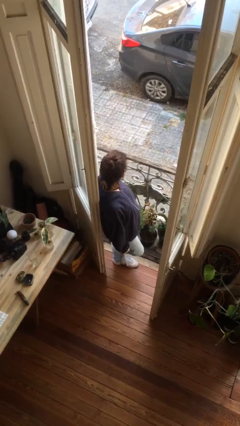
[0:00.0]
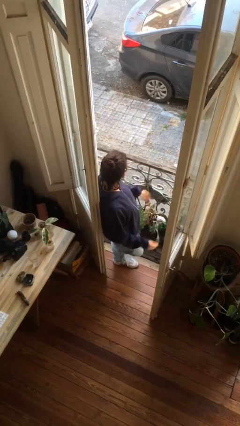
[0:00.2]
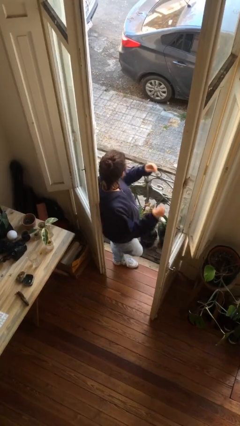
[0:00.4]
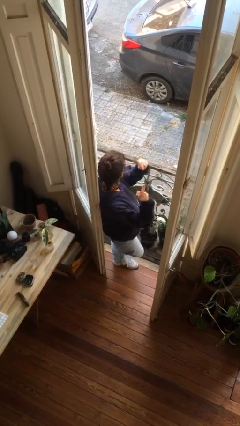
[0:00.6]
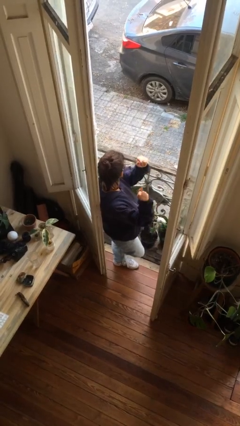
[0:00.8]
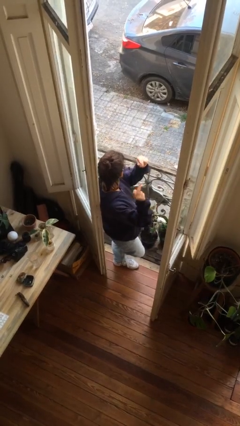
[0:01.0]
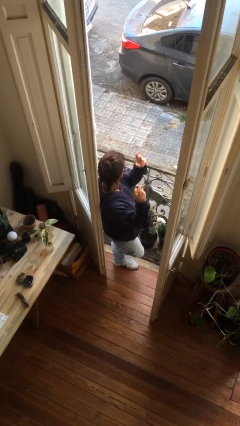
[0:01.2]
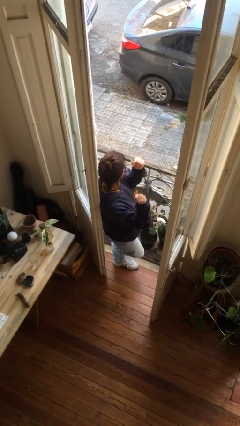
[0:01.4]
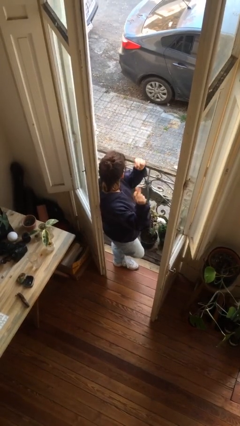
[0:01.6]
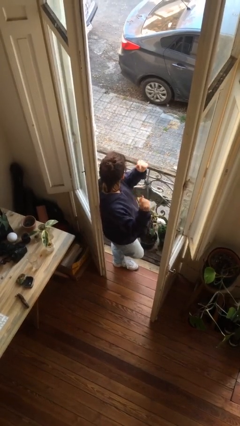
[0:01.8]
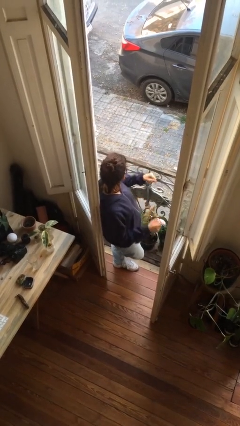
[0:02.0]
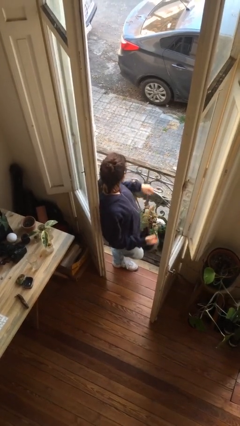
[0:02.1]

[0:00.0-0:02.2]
person snaps fingers

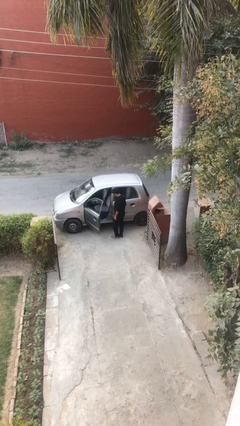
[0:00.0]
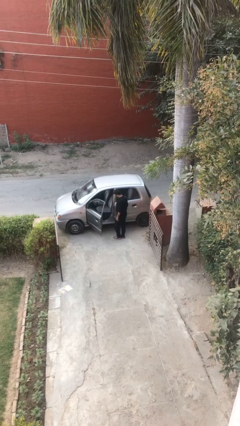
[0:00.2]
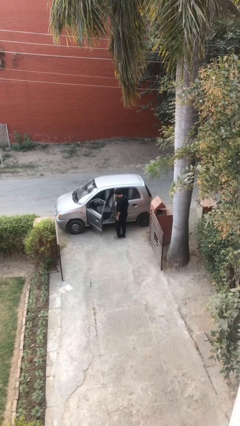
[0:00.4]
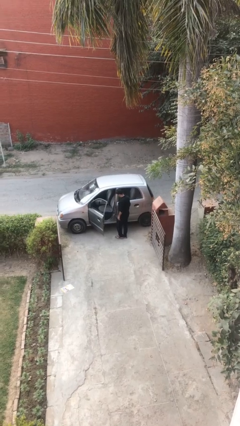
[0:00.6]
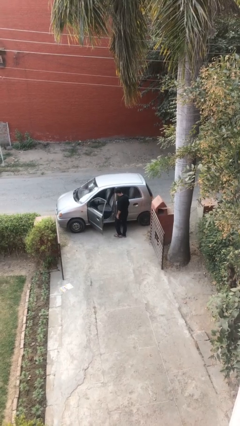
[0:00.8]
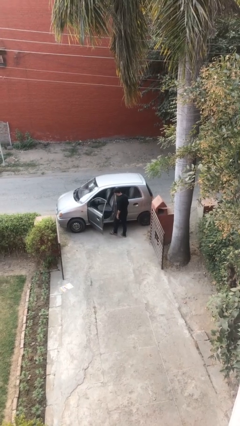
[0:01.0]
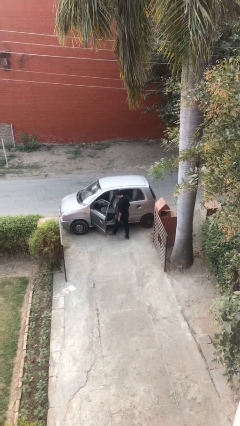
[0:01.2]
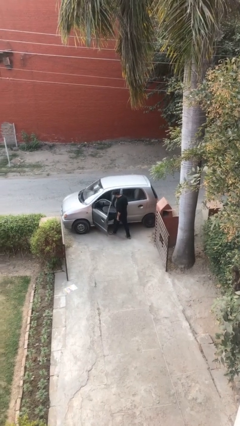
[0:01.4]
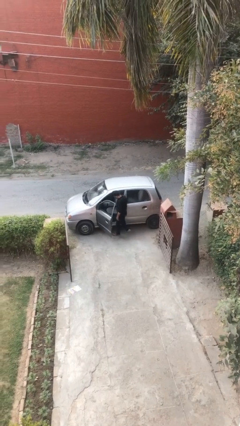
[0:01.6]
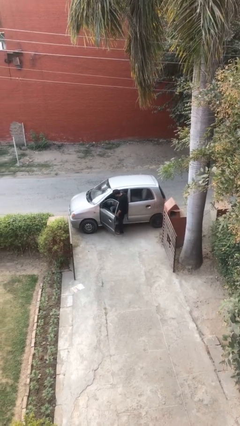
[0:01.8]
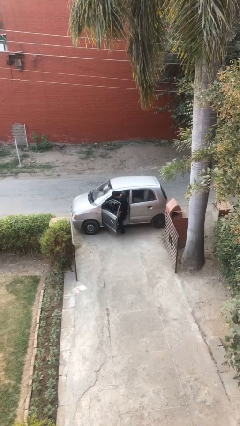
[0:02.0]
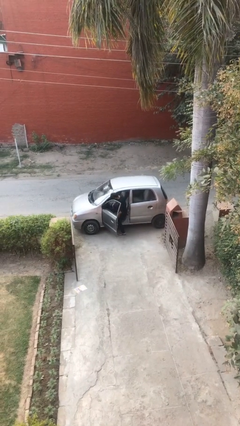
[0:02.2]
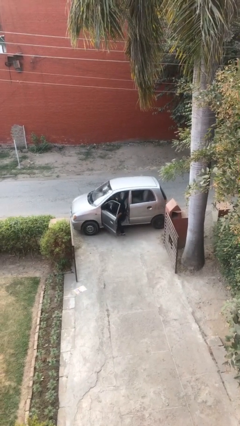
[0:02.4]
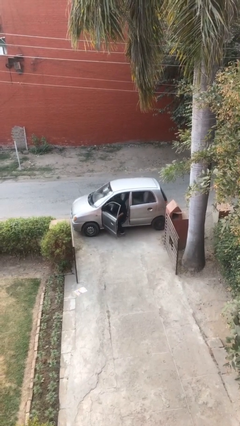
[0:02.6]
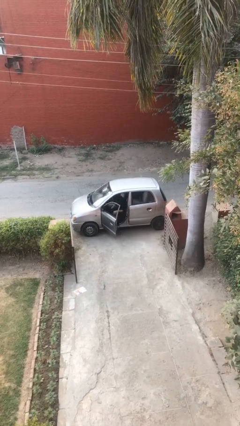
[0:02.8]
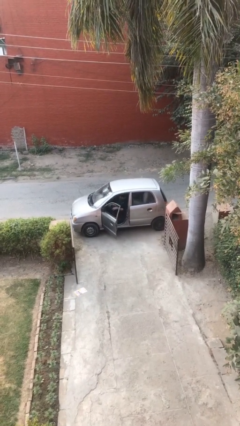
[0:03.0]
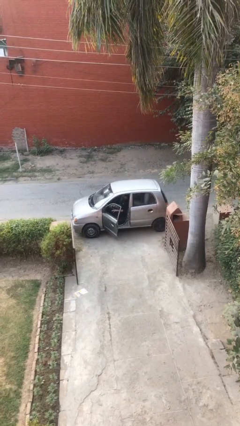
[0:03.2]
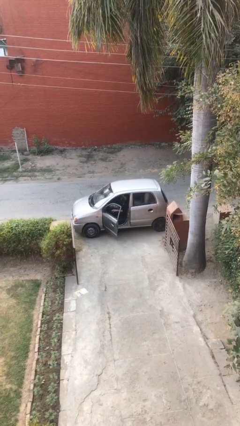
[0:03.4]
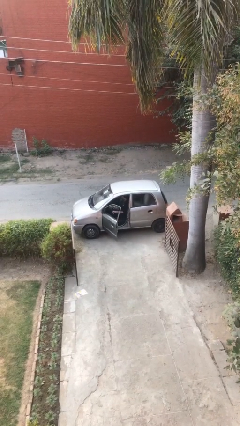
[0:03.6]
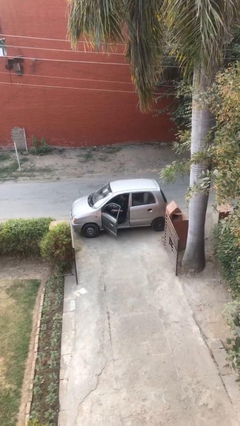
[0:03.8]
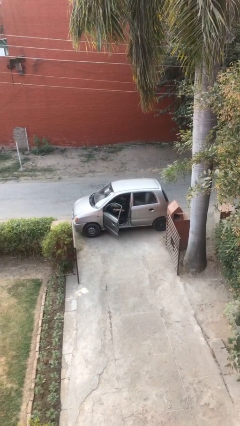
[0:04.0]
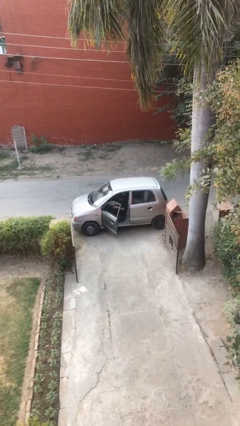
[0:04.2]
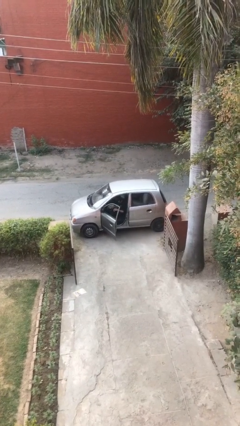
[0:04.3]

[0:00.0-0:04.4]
person enters car

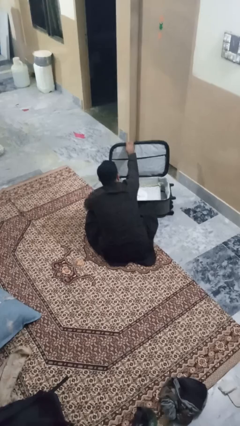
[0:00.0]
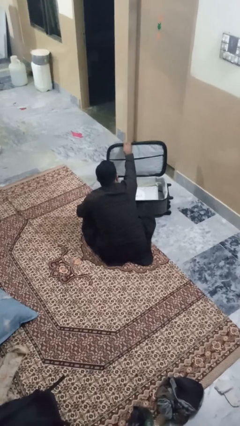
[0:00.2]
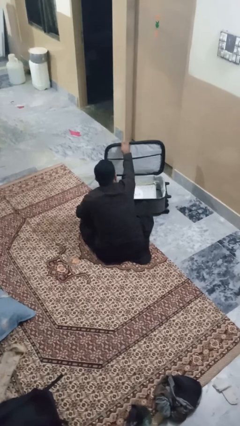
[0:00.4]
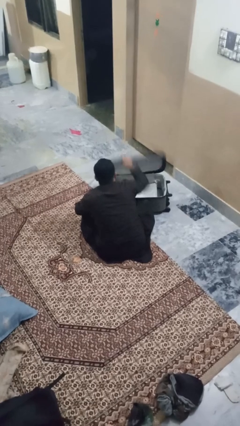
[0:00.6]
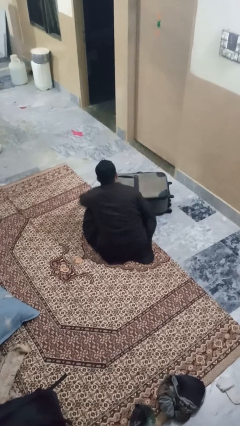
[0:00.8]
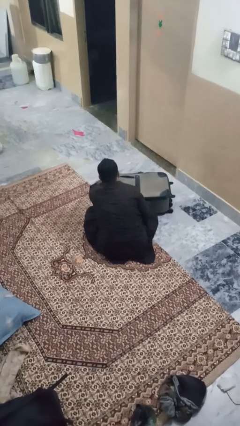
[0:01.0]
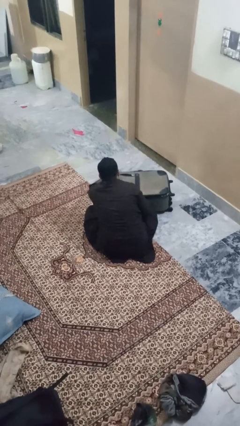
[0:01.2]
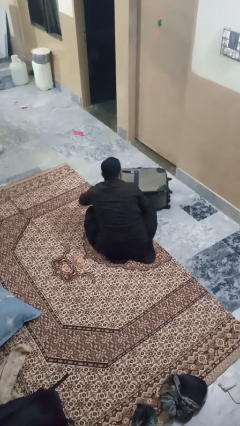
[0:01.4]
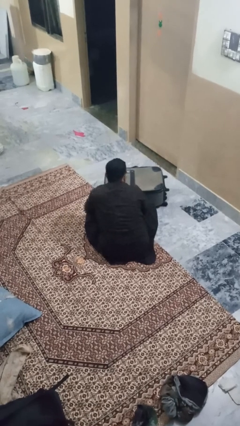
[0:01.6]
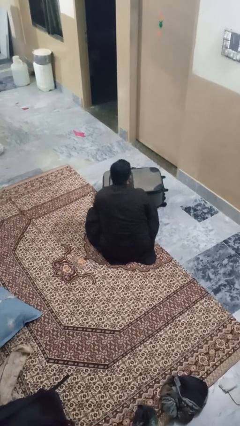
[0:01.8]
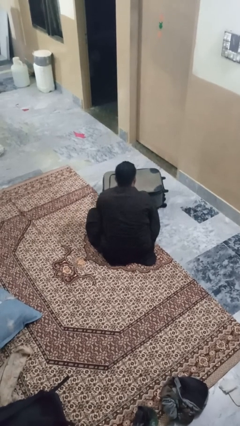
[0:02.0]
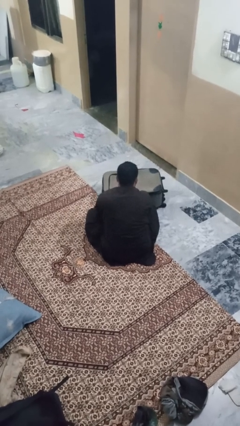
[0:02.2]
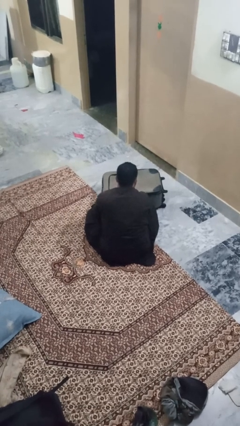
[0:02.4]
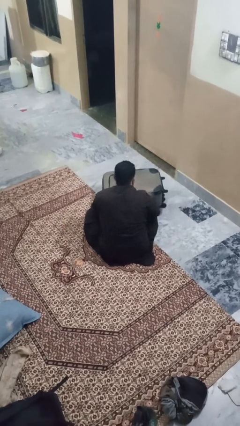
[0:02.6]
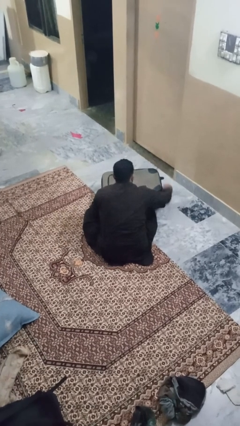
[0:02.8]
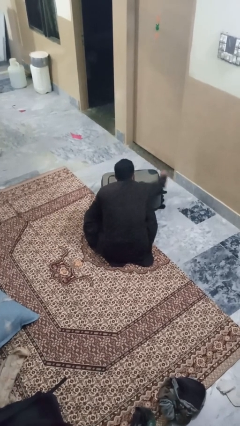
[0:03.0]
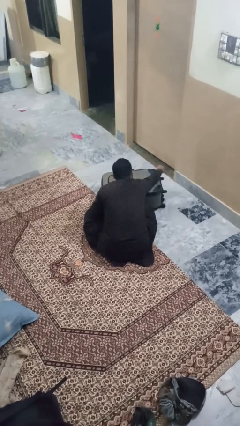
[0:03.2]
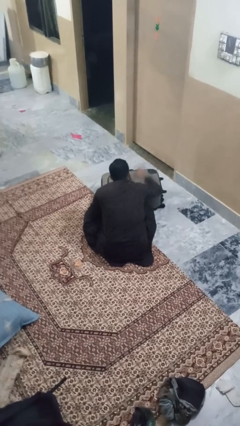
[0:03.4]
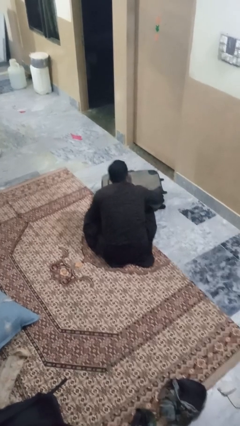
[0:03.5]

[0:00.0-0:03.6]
person closes suitcase

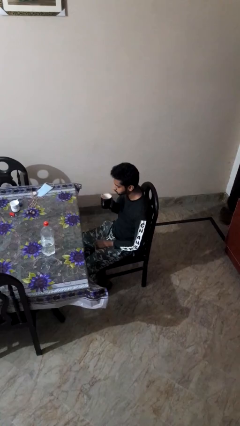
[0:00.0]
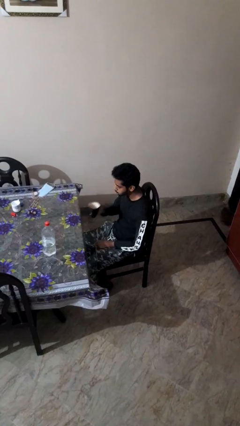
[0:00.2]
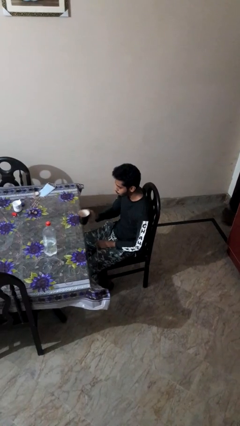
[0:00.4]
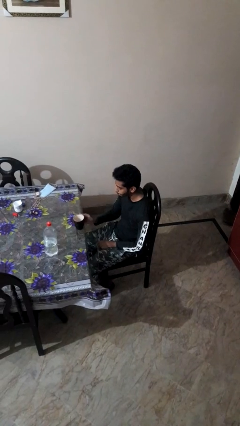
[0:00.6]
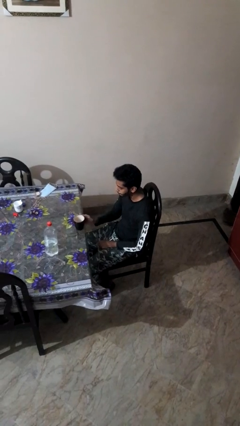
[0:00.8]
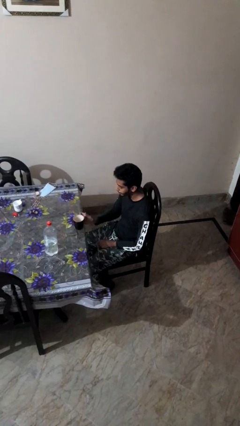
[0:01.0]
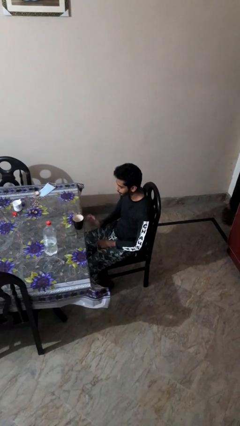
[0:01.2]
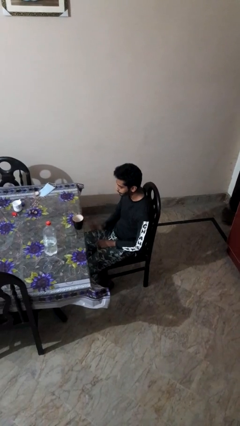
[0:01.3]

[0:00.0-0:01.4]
person puts down object on table

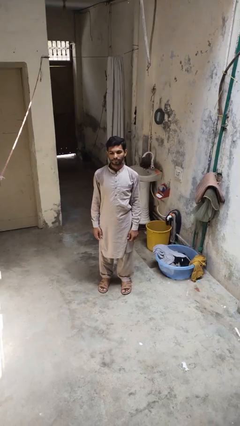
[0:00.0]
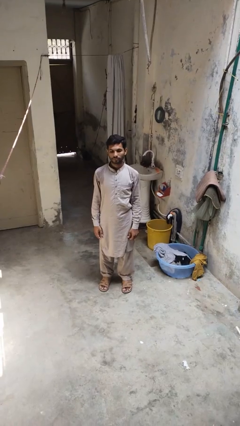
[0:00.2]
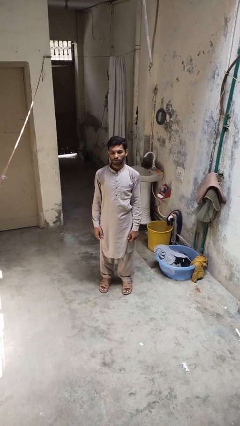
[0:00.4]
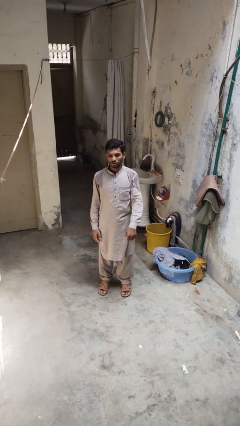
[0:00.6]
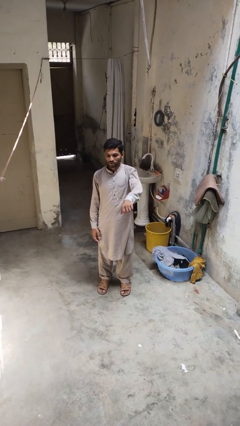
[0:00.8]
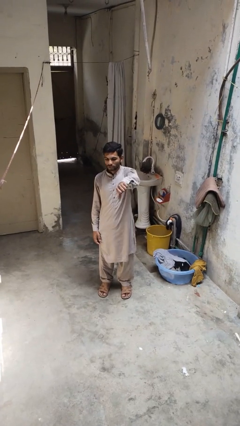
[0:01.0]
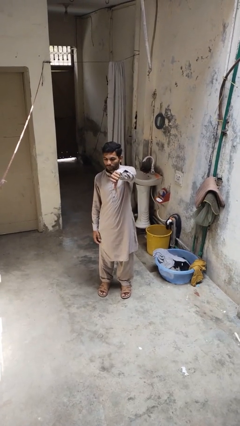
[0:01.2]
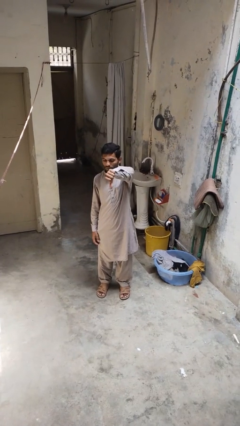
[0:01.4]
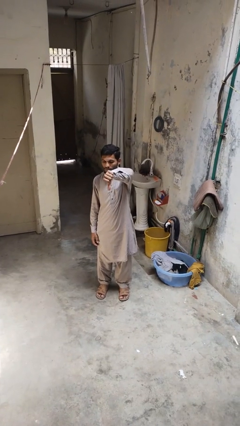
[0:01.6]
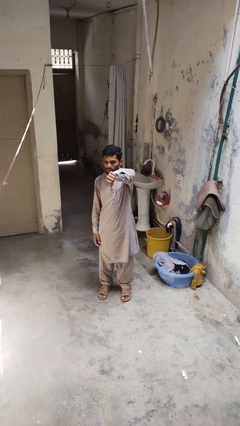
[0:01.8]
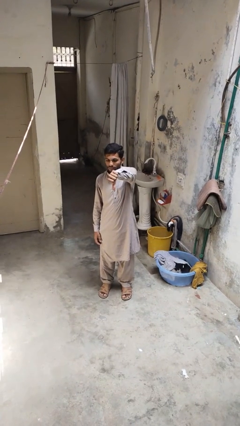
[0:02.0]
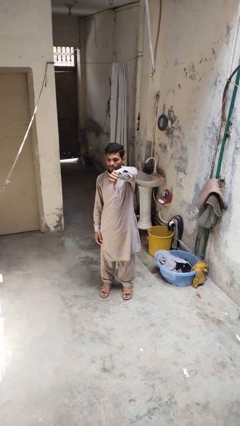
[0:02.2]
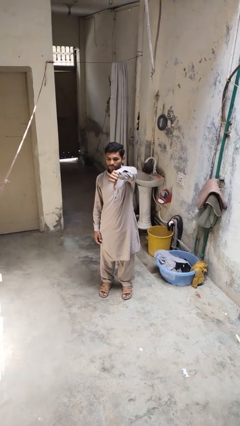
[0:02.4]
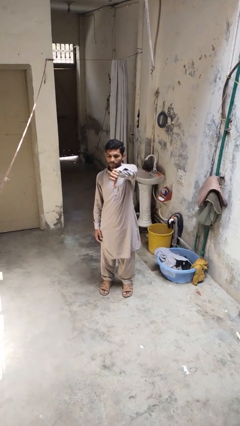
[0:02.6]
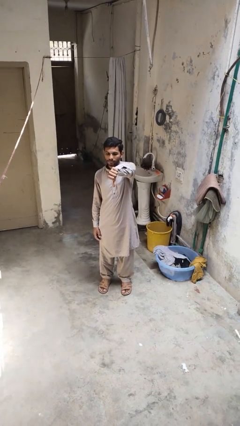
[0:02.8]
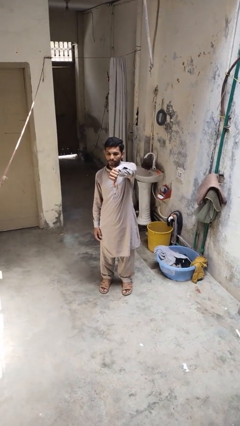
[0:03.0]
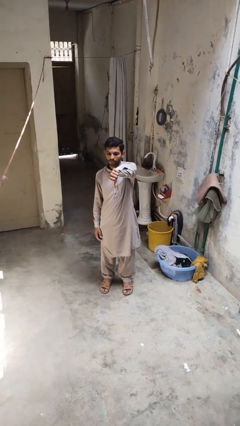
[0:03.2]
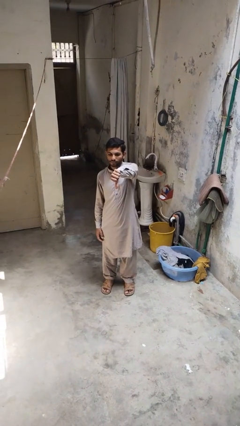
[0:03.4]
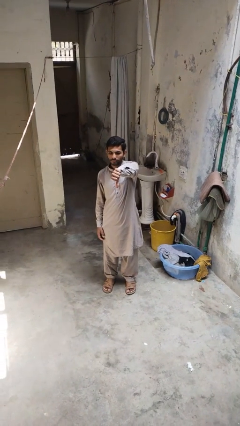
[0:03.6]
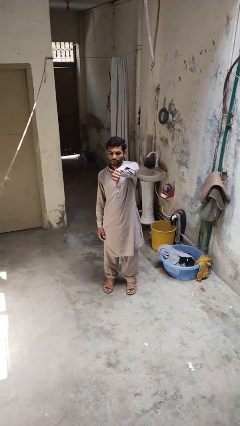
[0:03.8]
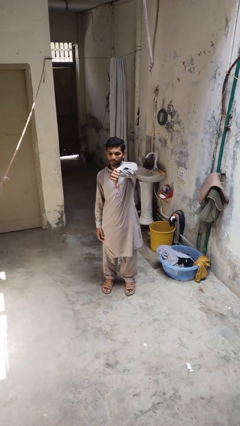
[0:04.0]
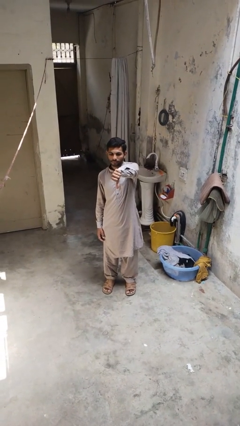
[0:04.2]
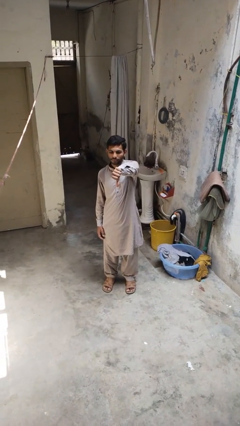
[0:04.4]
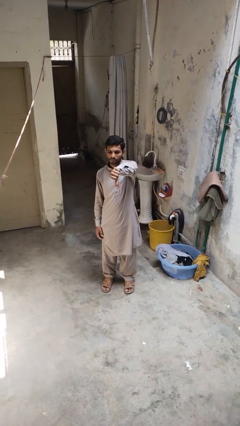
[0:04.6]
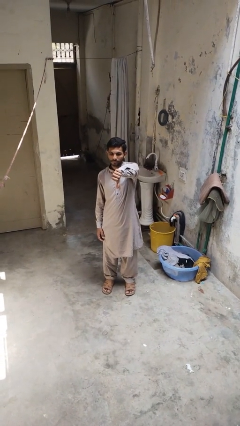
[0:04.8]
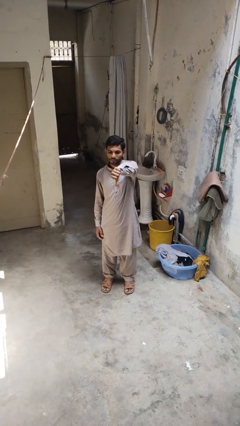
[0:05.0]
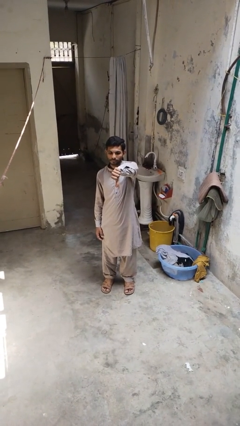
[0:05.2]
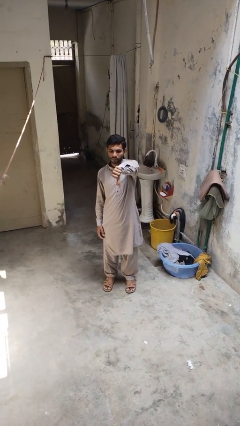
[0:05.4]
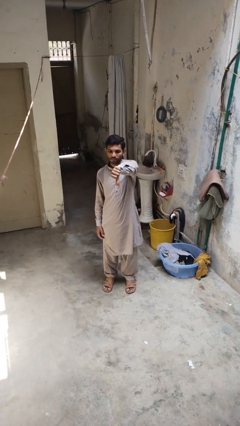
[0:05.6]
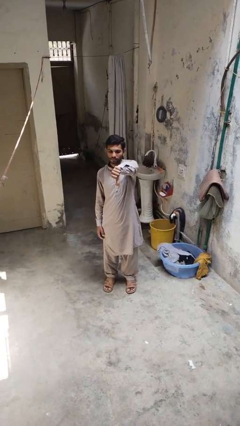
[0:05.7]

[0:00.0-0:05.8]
person gestures thumbs down

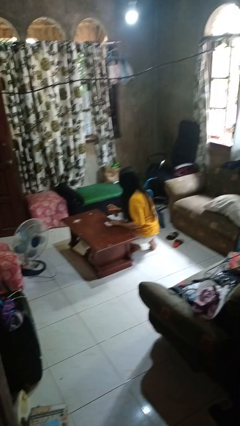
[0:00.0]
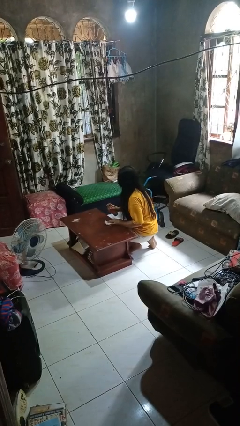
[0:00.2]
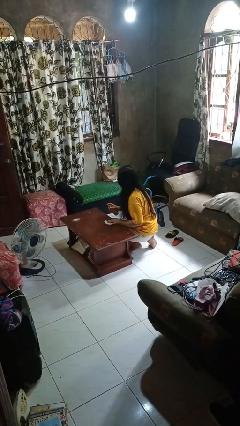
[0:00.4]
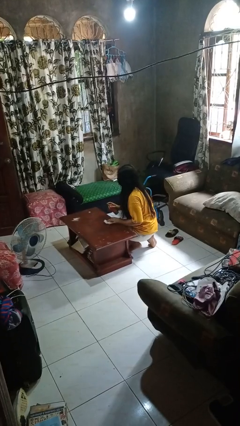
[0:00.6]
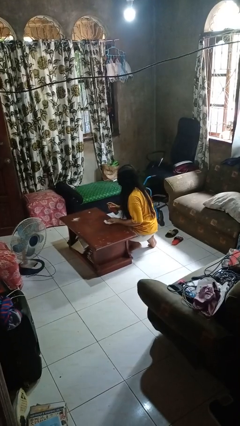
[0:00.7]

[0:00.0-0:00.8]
person sprays from bottle
